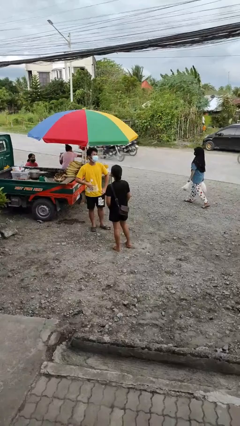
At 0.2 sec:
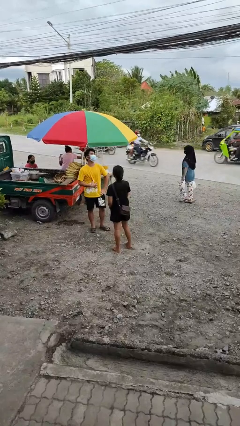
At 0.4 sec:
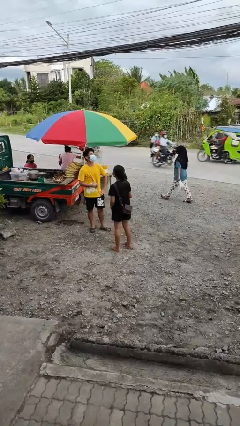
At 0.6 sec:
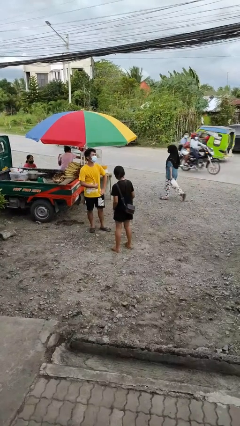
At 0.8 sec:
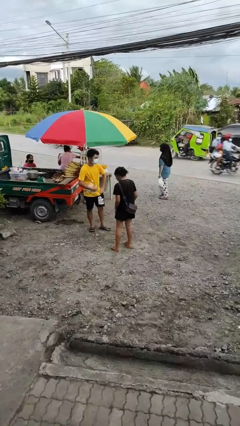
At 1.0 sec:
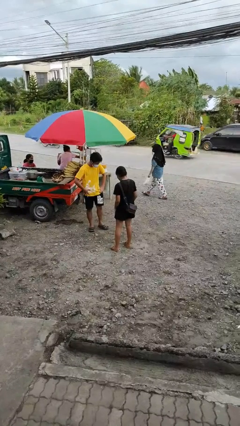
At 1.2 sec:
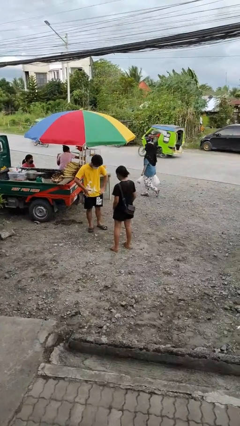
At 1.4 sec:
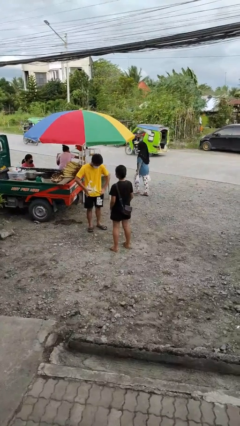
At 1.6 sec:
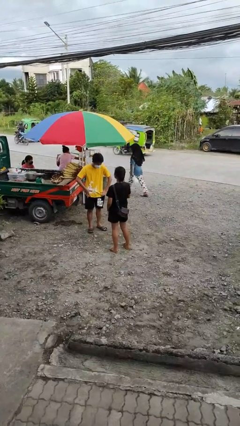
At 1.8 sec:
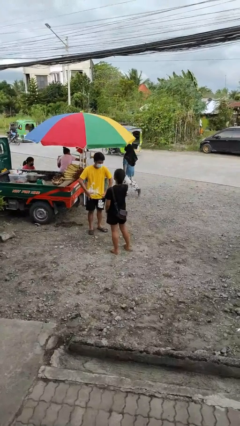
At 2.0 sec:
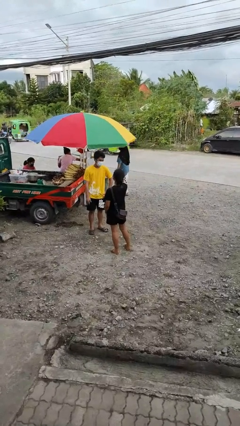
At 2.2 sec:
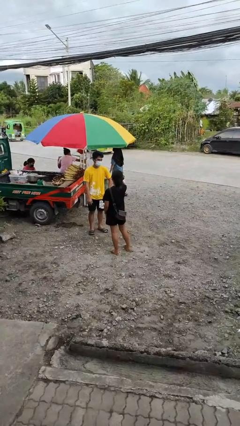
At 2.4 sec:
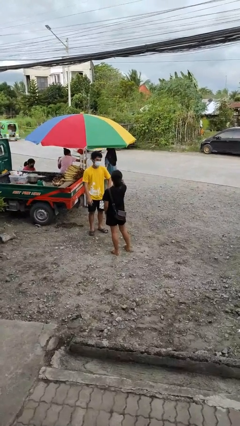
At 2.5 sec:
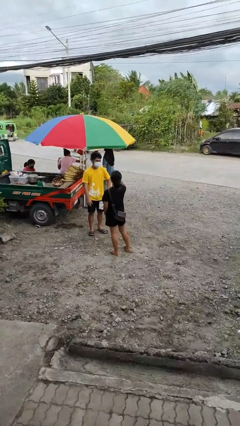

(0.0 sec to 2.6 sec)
person laughs with person

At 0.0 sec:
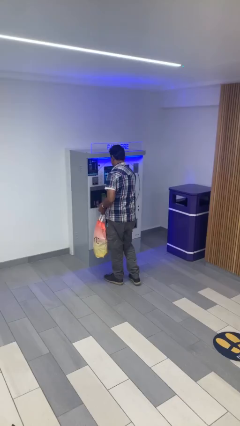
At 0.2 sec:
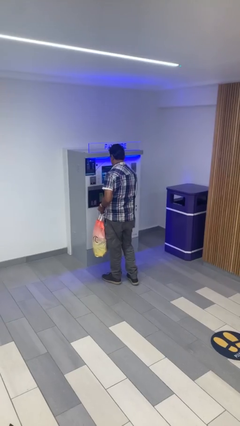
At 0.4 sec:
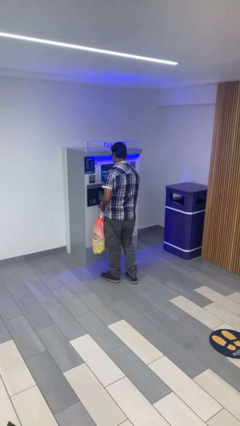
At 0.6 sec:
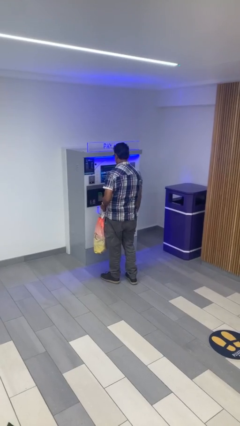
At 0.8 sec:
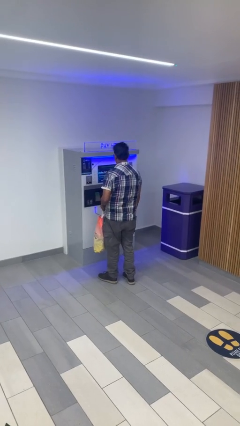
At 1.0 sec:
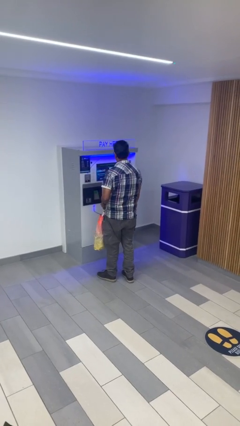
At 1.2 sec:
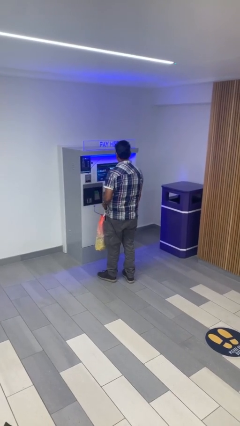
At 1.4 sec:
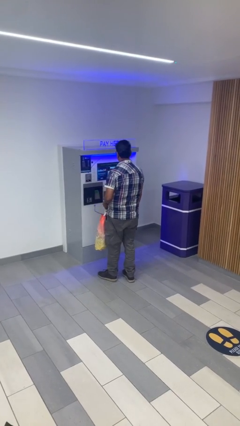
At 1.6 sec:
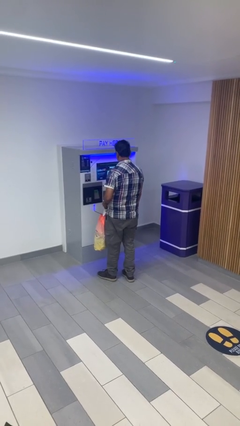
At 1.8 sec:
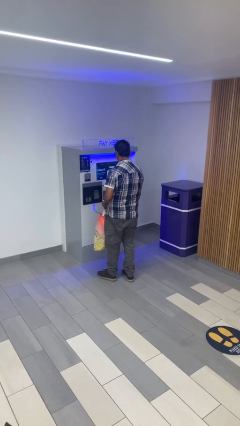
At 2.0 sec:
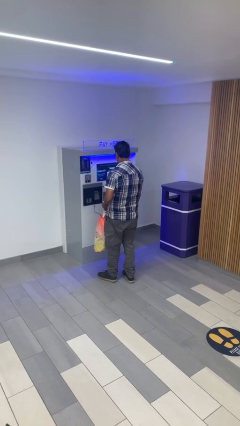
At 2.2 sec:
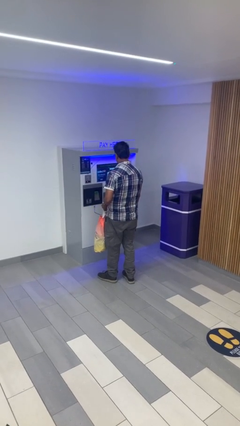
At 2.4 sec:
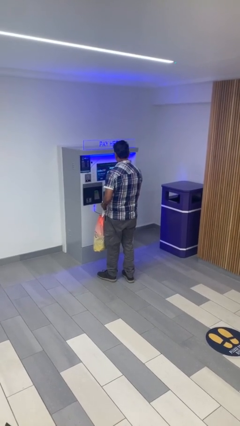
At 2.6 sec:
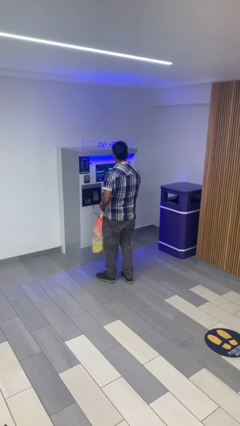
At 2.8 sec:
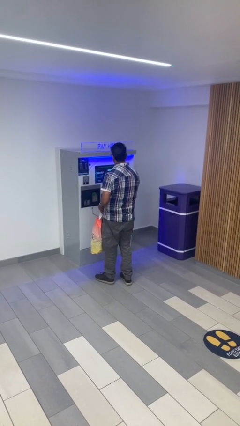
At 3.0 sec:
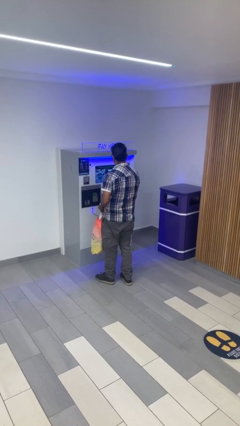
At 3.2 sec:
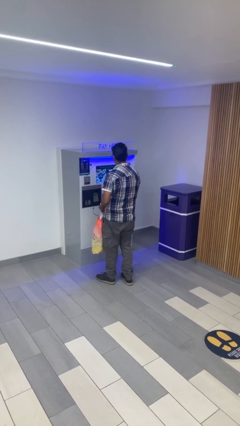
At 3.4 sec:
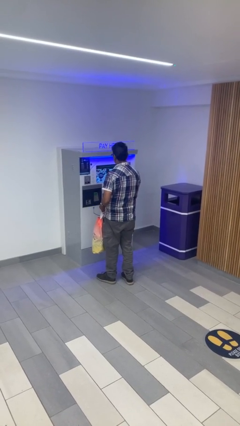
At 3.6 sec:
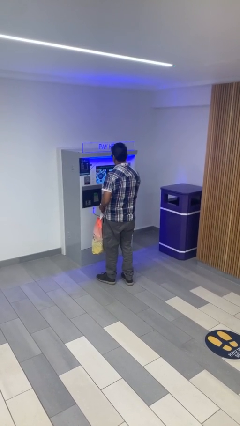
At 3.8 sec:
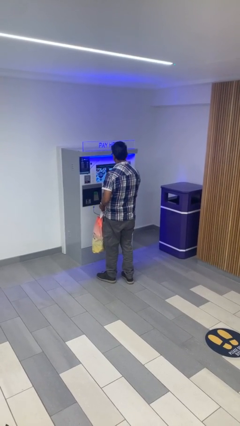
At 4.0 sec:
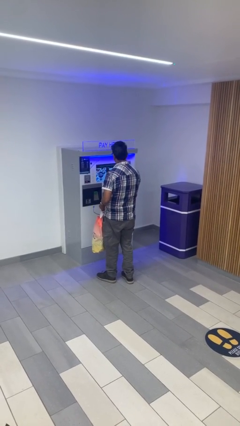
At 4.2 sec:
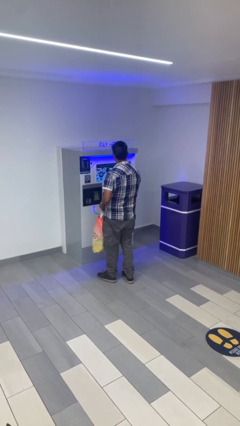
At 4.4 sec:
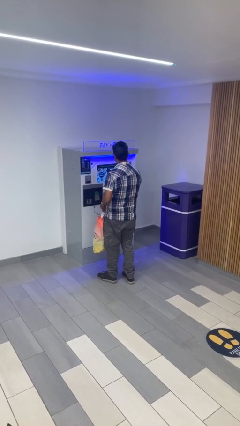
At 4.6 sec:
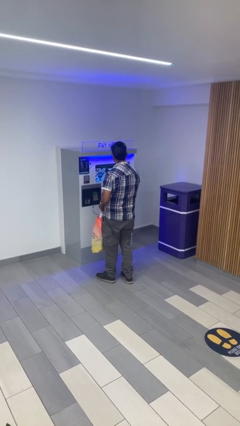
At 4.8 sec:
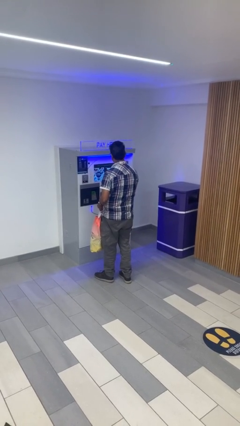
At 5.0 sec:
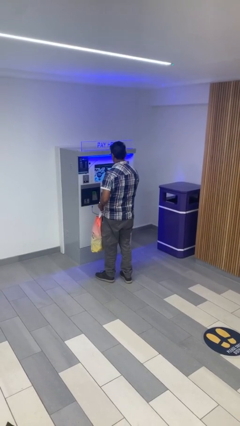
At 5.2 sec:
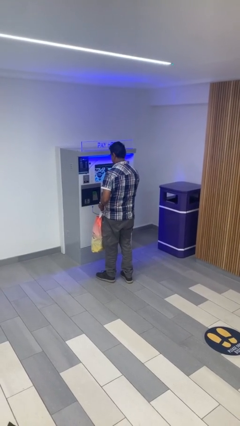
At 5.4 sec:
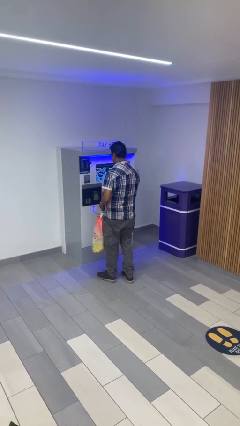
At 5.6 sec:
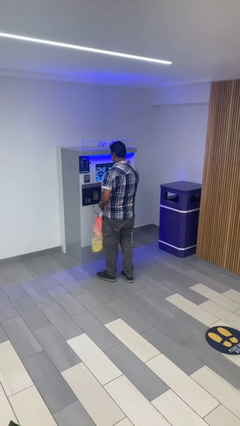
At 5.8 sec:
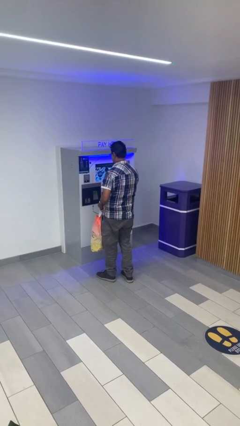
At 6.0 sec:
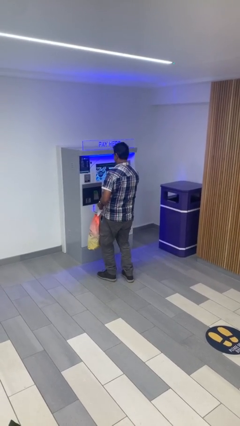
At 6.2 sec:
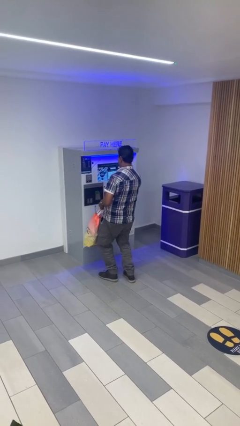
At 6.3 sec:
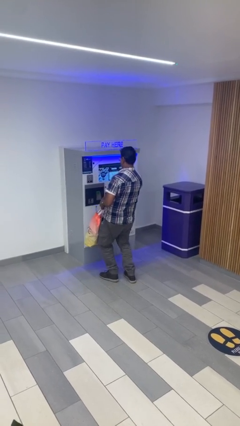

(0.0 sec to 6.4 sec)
person purchases from machine

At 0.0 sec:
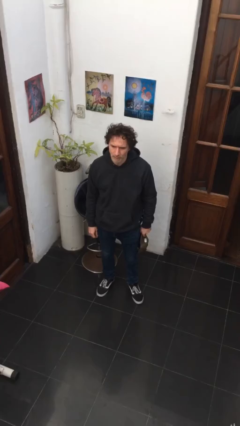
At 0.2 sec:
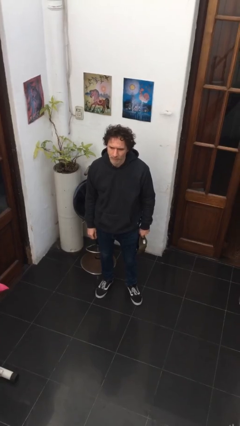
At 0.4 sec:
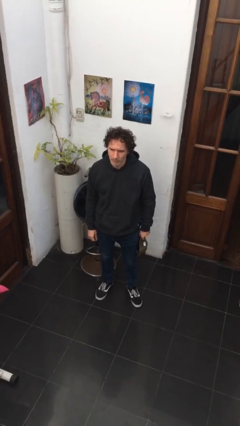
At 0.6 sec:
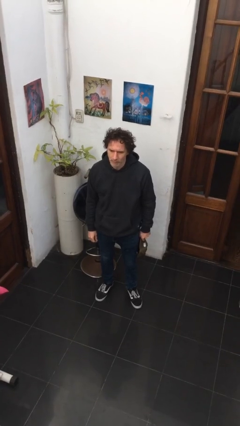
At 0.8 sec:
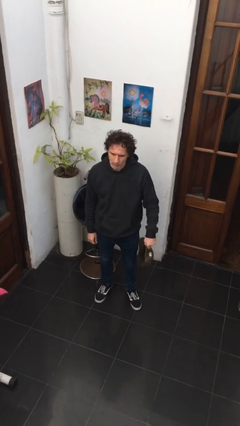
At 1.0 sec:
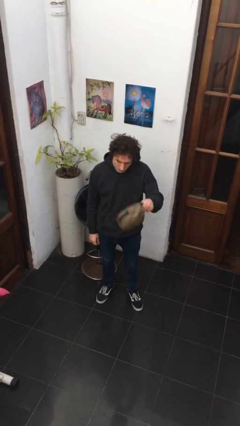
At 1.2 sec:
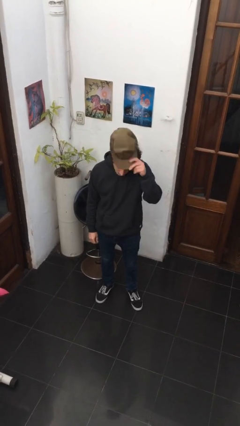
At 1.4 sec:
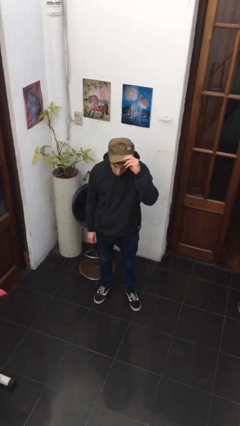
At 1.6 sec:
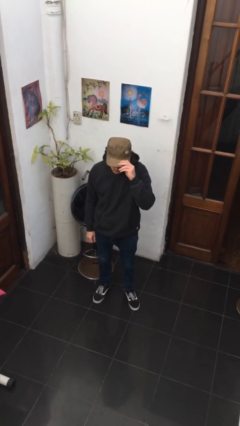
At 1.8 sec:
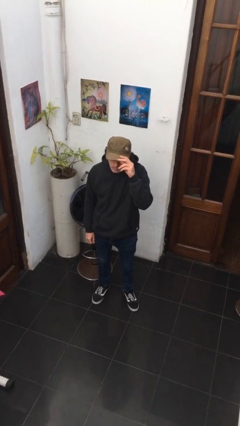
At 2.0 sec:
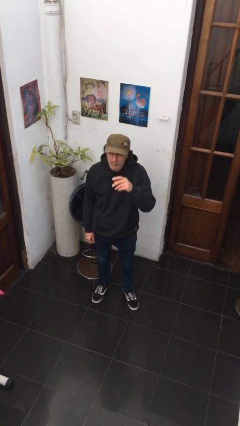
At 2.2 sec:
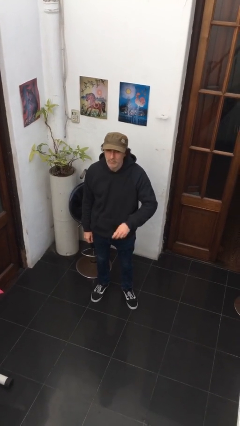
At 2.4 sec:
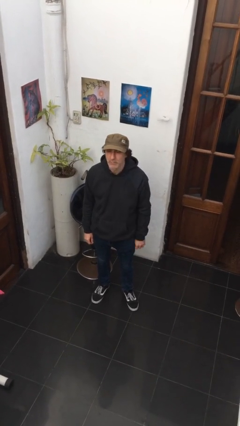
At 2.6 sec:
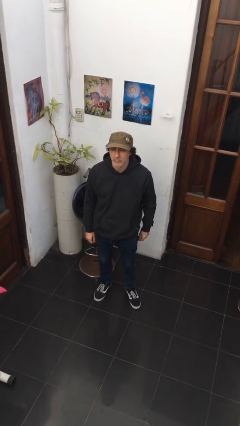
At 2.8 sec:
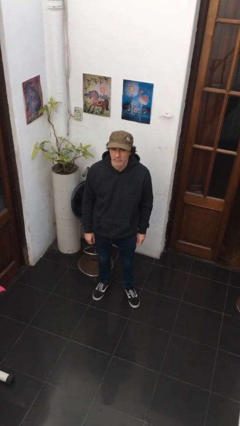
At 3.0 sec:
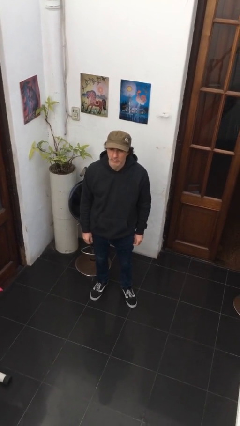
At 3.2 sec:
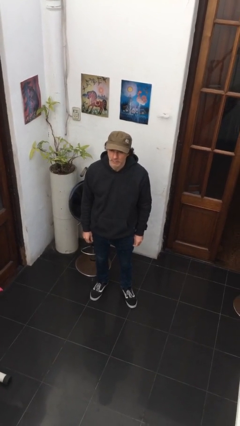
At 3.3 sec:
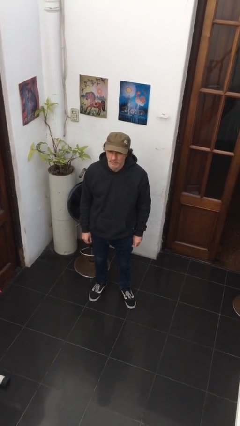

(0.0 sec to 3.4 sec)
person puts on hat

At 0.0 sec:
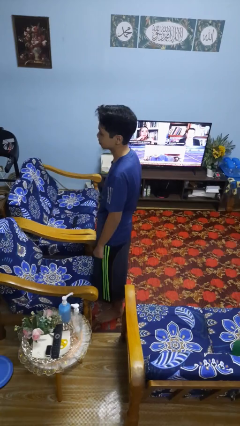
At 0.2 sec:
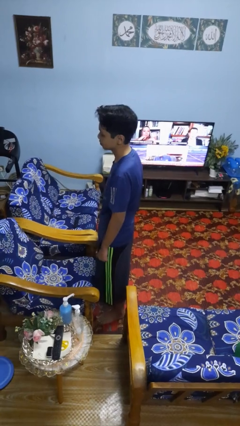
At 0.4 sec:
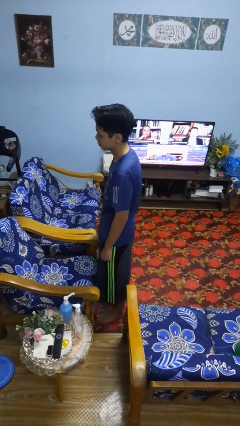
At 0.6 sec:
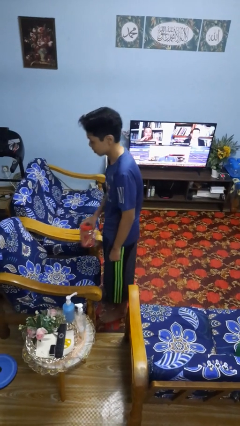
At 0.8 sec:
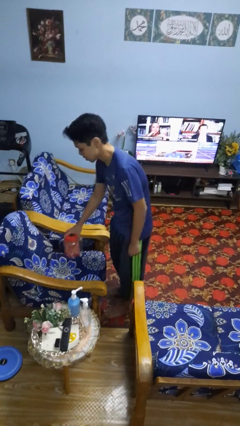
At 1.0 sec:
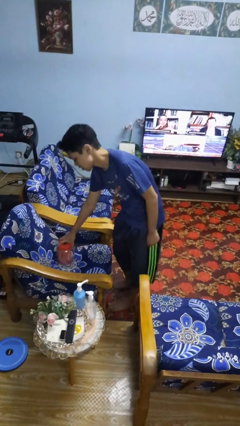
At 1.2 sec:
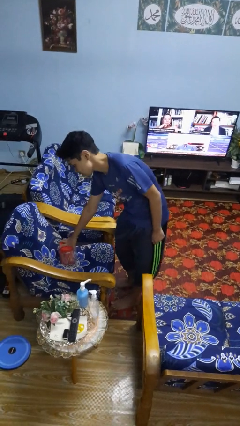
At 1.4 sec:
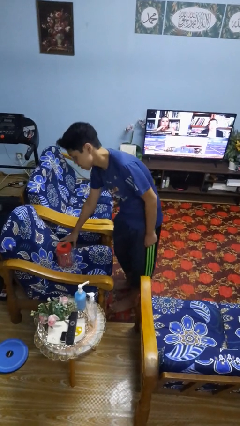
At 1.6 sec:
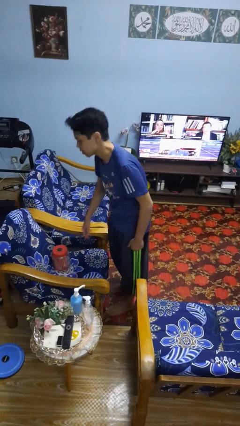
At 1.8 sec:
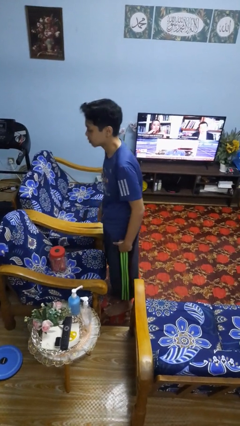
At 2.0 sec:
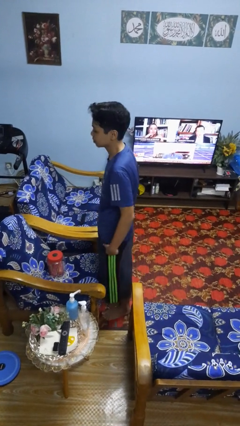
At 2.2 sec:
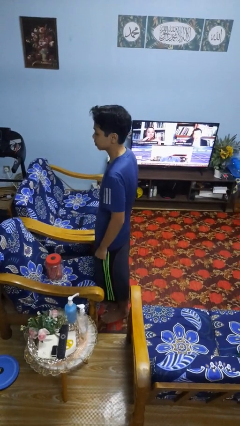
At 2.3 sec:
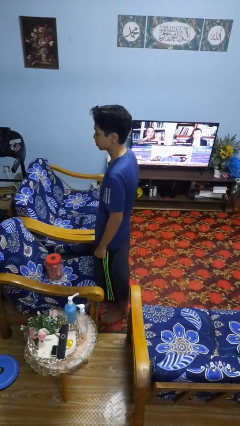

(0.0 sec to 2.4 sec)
person puts down object on couch

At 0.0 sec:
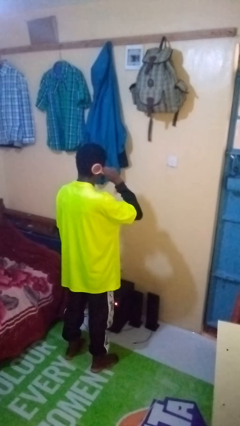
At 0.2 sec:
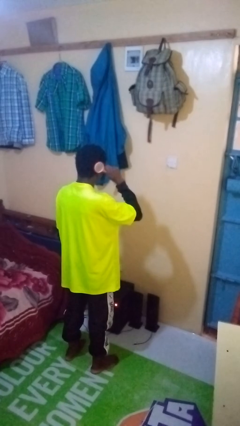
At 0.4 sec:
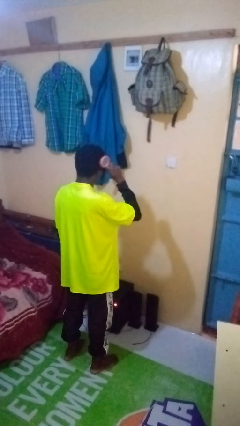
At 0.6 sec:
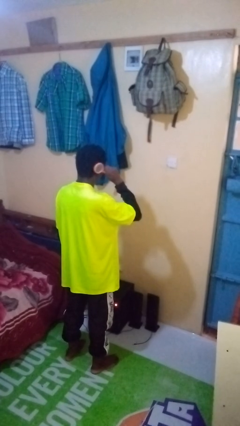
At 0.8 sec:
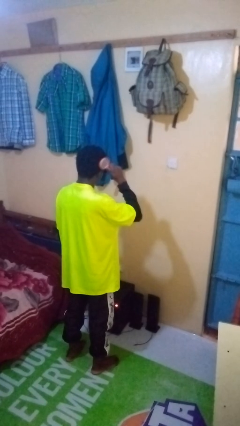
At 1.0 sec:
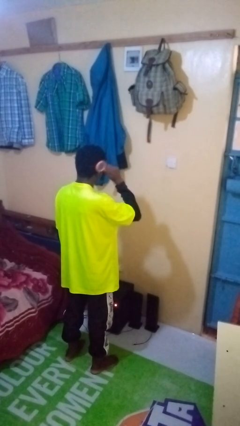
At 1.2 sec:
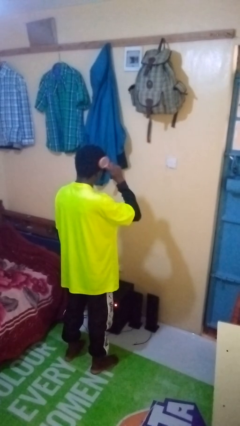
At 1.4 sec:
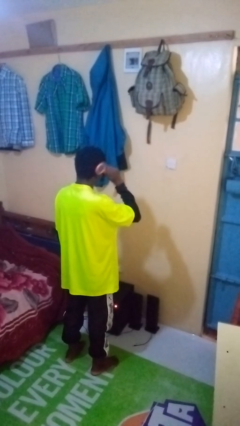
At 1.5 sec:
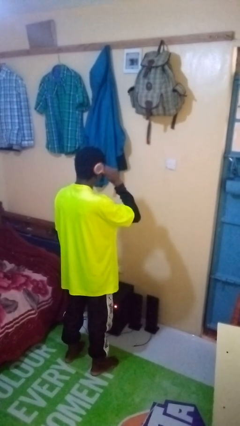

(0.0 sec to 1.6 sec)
person brushes hair

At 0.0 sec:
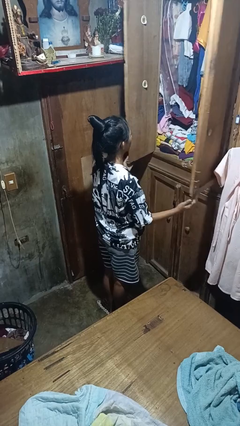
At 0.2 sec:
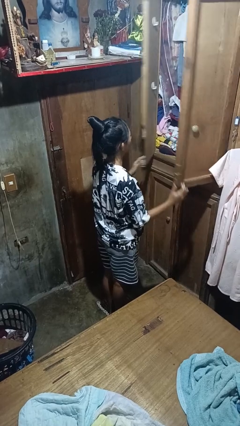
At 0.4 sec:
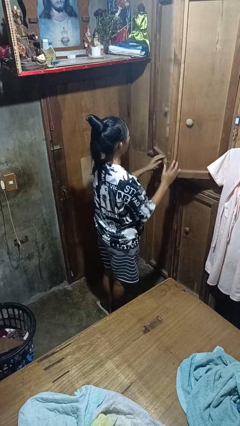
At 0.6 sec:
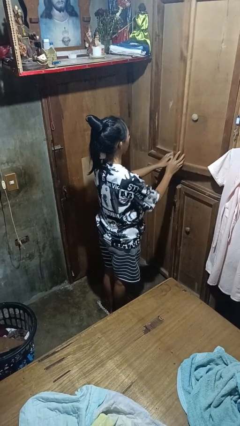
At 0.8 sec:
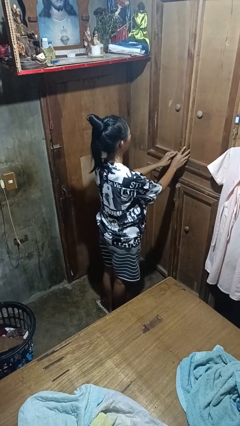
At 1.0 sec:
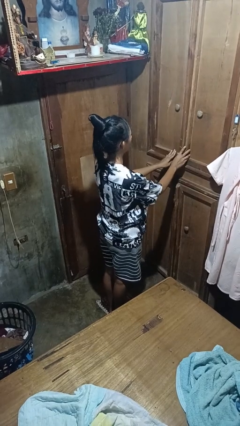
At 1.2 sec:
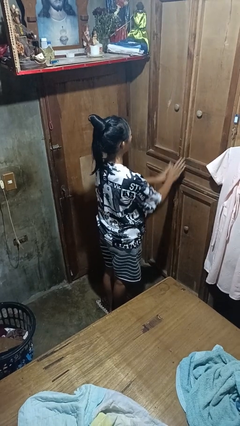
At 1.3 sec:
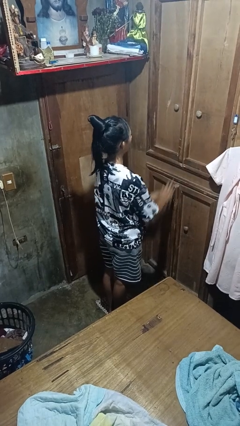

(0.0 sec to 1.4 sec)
person closes closet door
